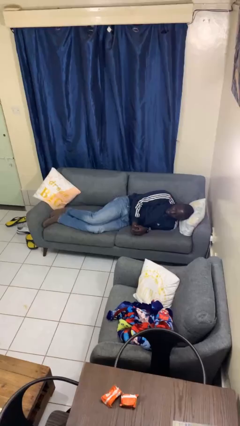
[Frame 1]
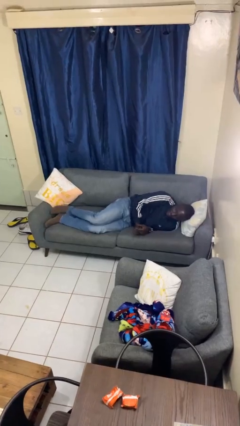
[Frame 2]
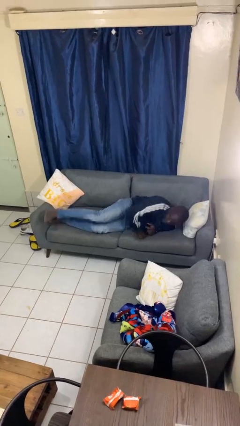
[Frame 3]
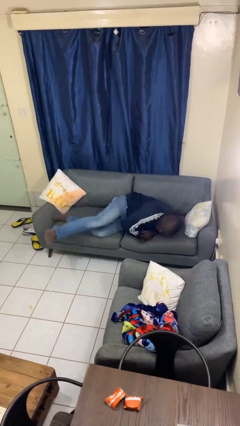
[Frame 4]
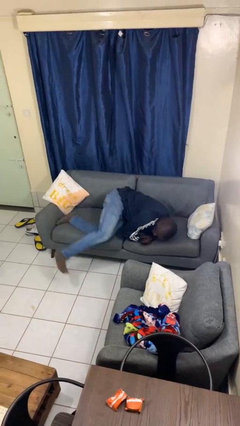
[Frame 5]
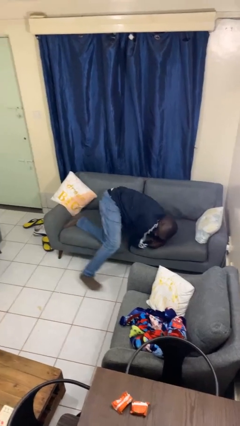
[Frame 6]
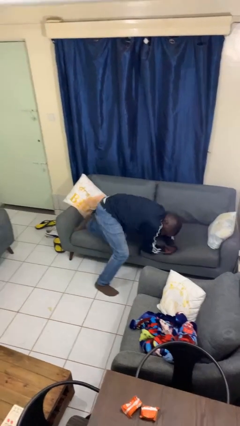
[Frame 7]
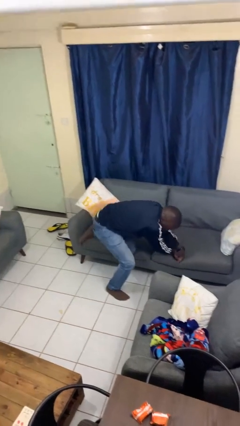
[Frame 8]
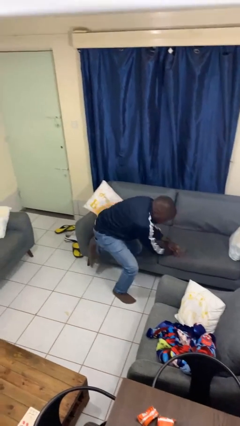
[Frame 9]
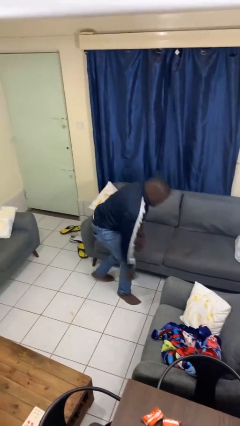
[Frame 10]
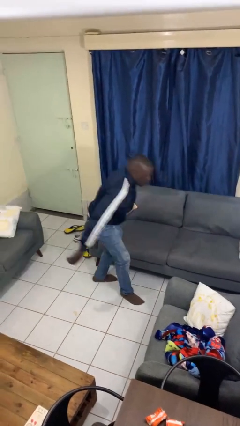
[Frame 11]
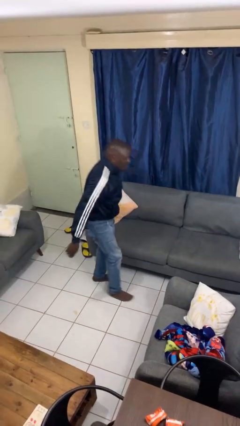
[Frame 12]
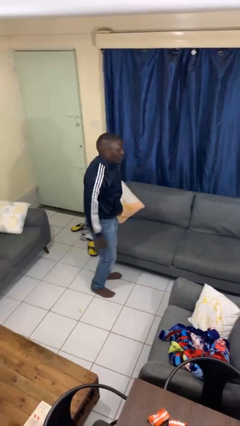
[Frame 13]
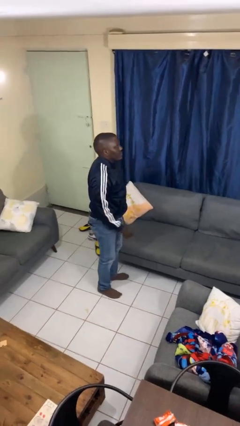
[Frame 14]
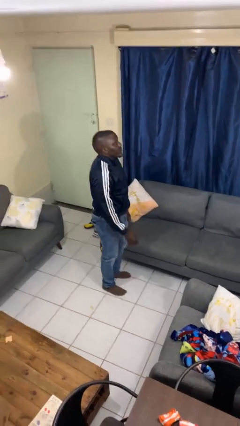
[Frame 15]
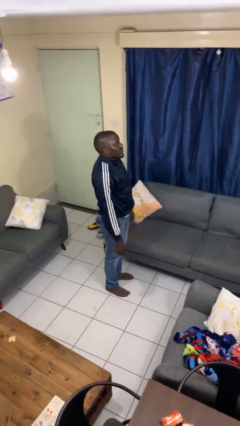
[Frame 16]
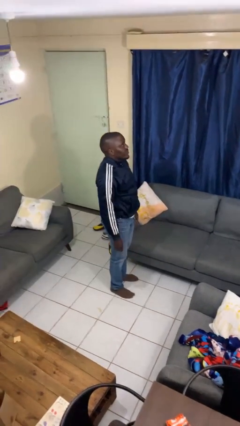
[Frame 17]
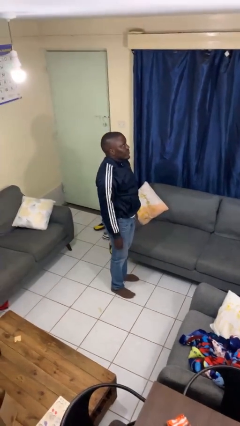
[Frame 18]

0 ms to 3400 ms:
person stands up

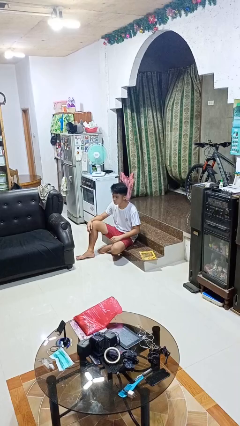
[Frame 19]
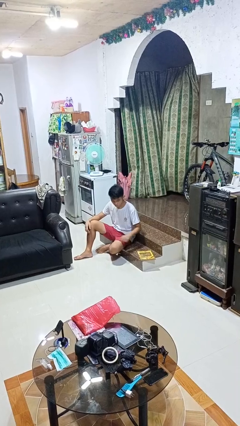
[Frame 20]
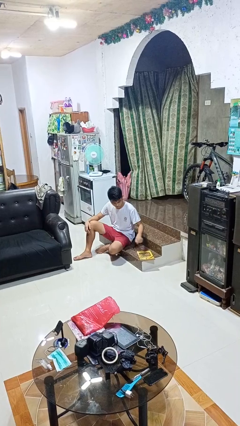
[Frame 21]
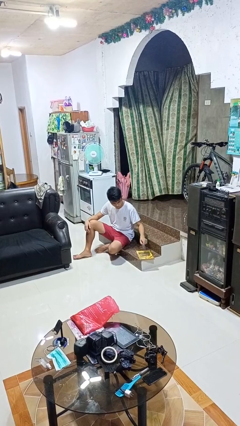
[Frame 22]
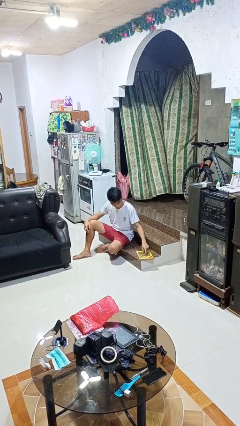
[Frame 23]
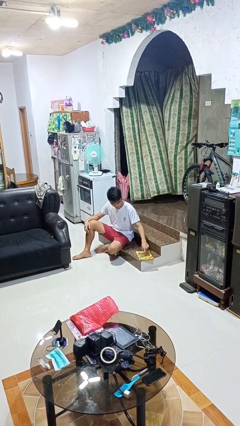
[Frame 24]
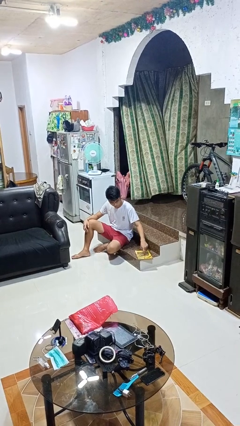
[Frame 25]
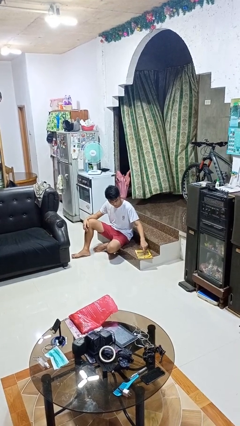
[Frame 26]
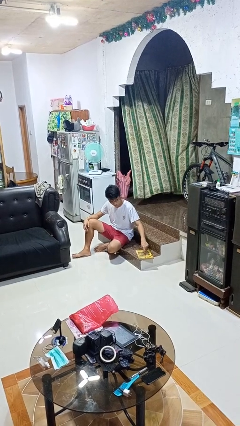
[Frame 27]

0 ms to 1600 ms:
person taps object with finger

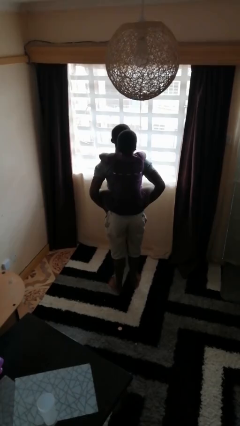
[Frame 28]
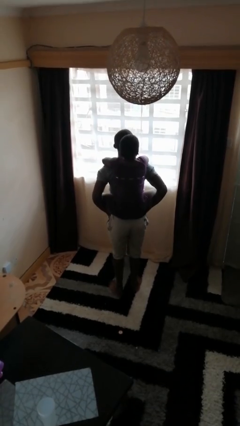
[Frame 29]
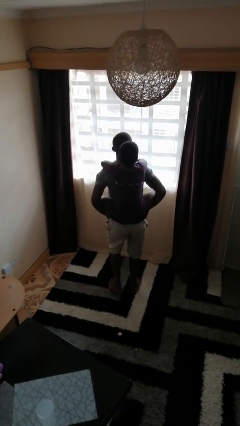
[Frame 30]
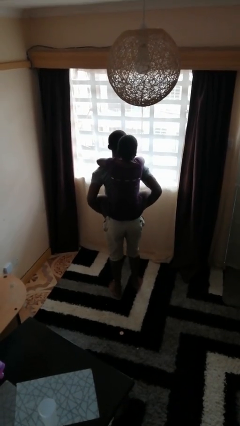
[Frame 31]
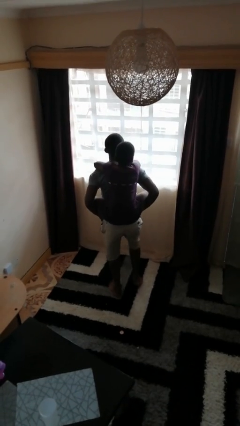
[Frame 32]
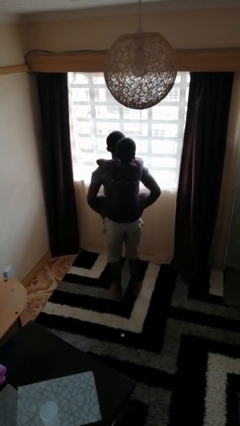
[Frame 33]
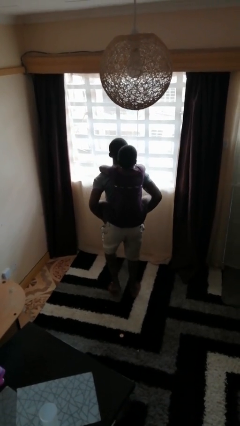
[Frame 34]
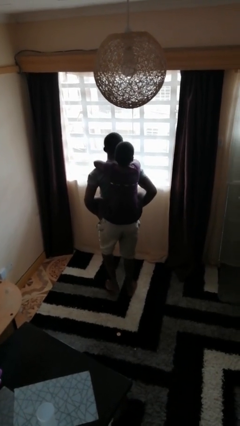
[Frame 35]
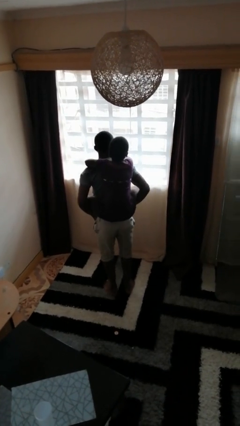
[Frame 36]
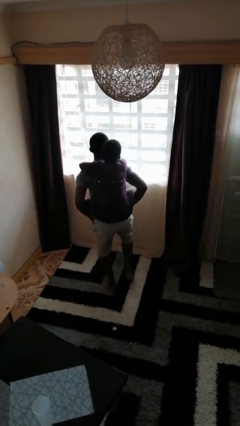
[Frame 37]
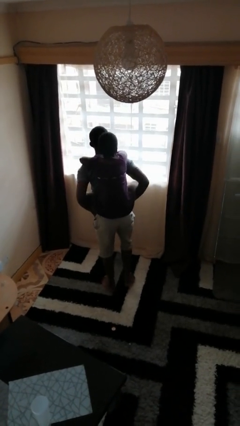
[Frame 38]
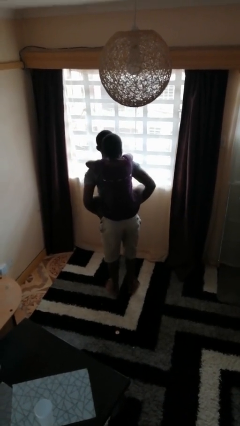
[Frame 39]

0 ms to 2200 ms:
person carries person on back

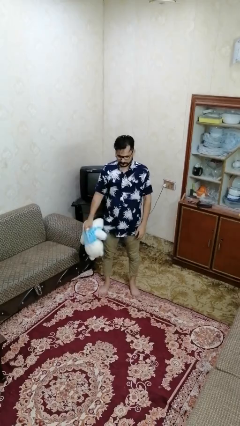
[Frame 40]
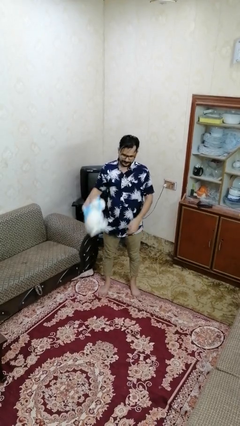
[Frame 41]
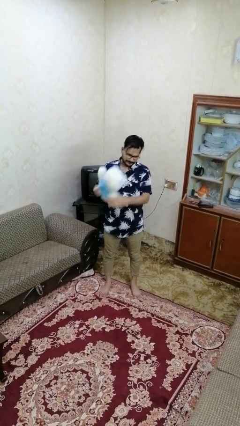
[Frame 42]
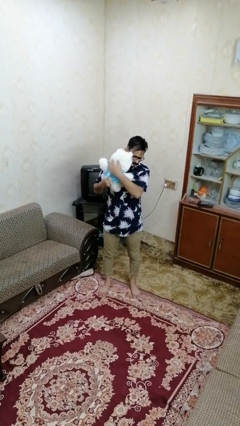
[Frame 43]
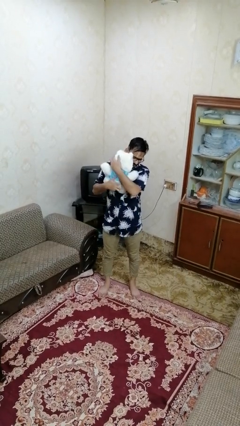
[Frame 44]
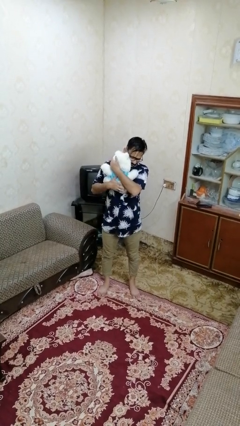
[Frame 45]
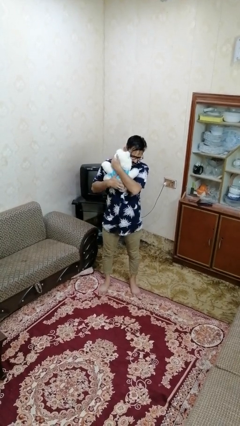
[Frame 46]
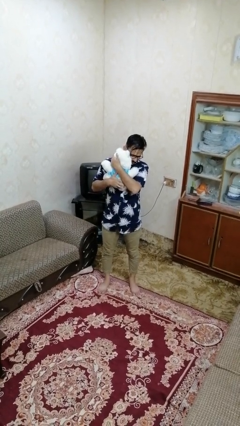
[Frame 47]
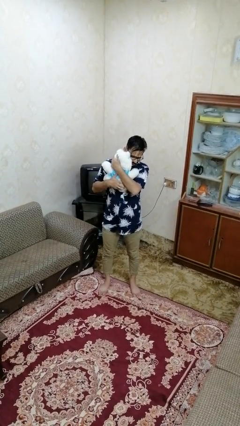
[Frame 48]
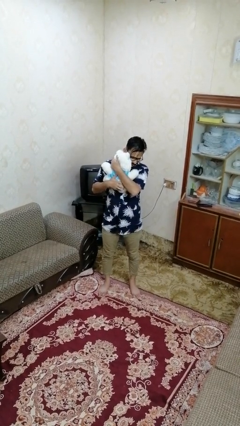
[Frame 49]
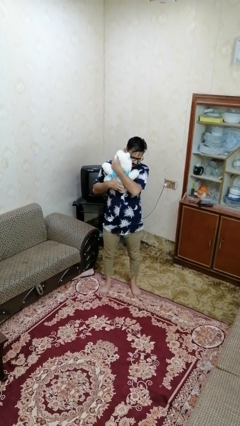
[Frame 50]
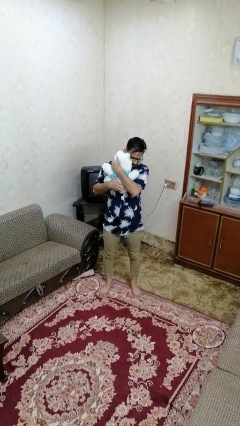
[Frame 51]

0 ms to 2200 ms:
person hugs stuffed animal

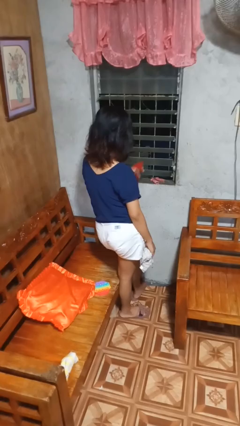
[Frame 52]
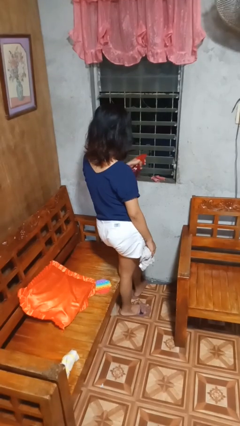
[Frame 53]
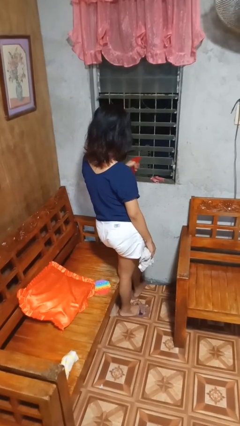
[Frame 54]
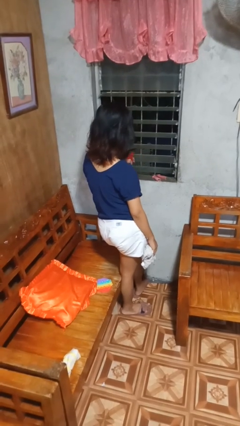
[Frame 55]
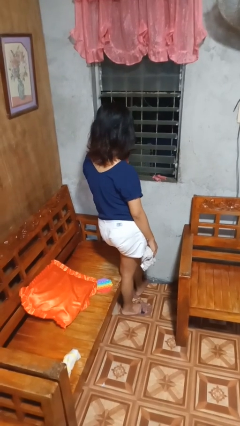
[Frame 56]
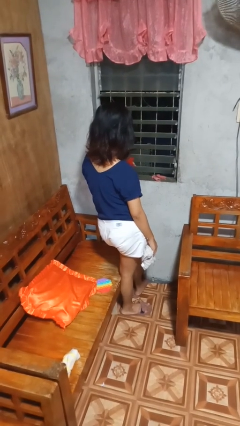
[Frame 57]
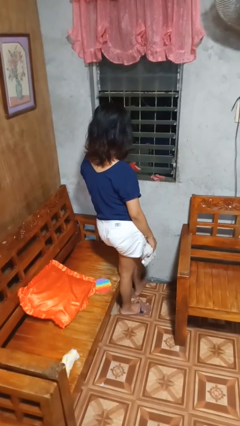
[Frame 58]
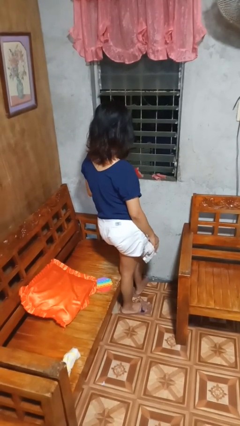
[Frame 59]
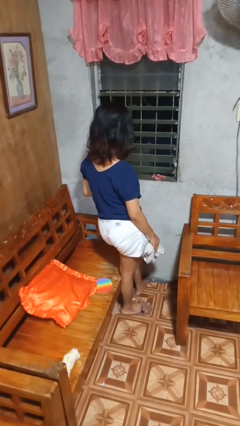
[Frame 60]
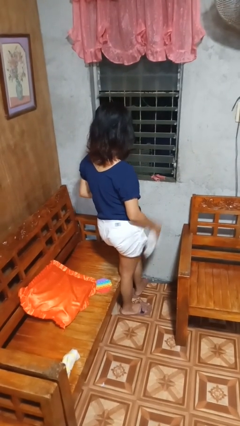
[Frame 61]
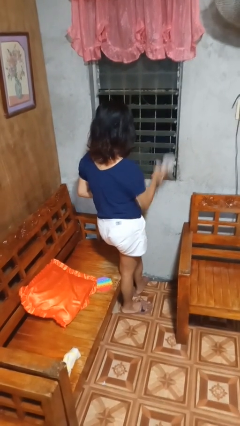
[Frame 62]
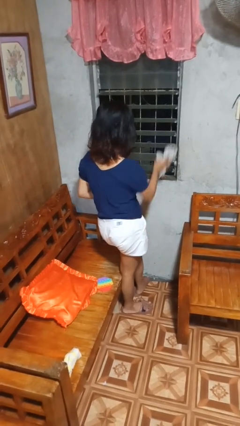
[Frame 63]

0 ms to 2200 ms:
person sprays from bottle

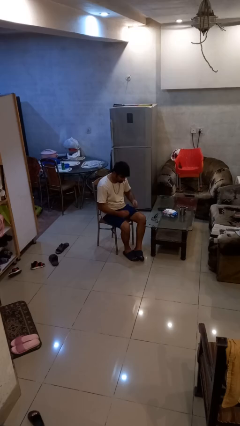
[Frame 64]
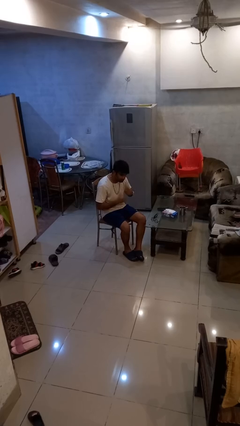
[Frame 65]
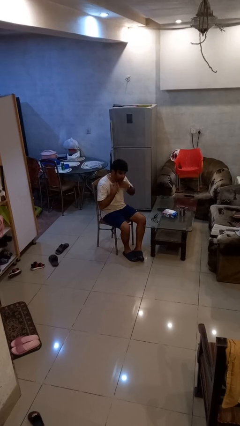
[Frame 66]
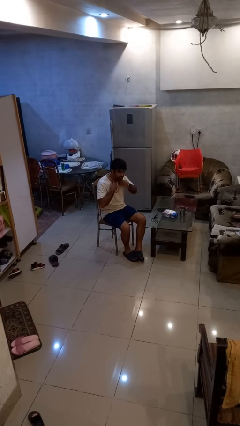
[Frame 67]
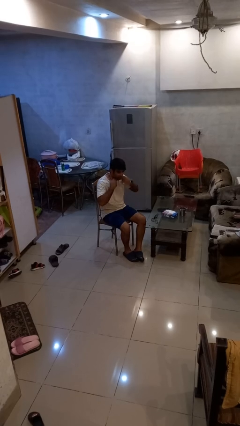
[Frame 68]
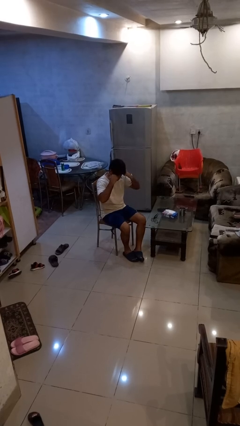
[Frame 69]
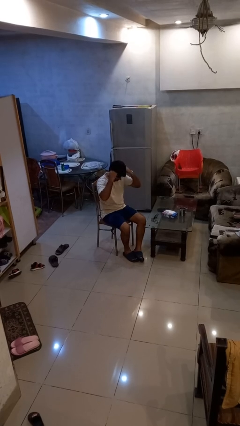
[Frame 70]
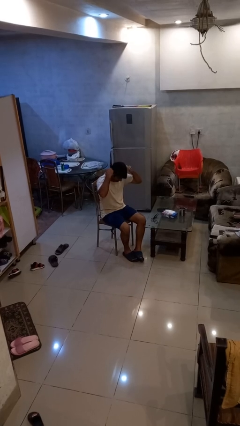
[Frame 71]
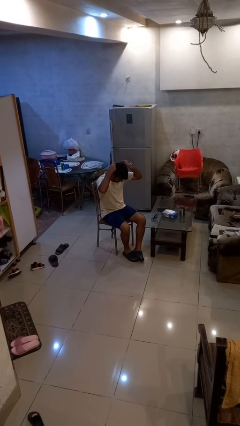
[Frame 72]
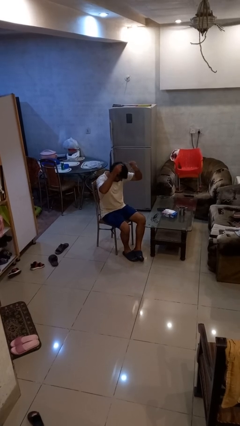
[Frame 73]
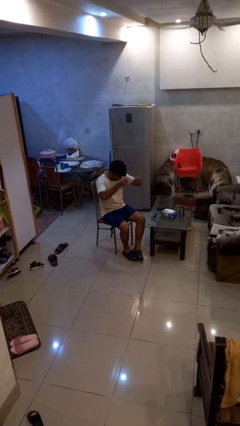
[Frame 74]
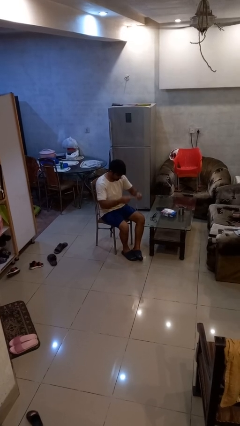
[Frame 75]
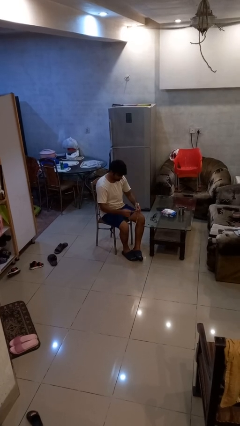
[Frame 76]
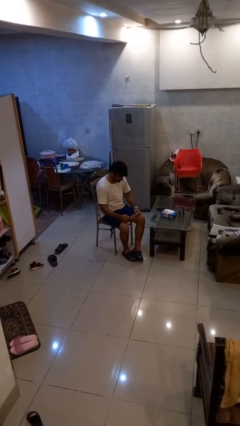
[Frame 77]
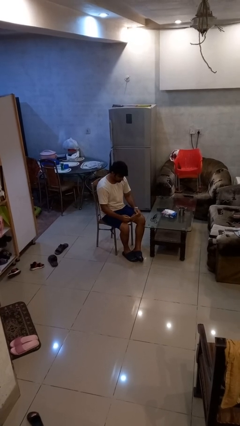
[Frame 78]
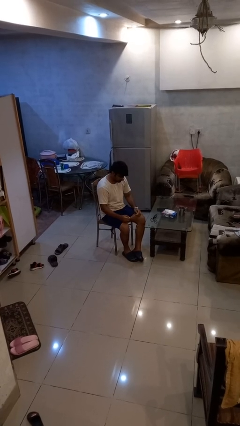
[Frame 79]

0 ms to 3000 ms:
person takes off necklace

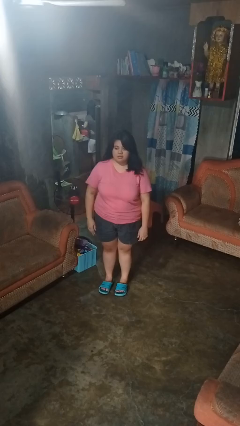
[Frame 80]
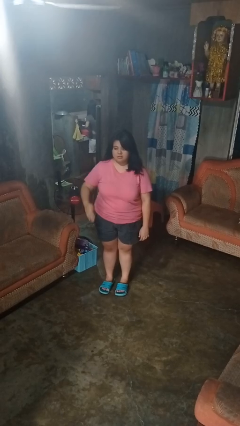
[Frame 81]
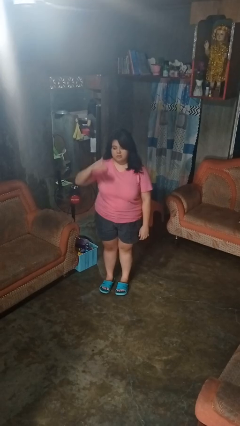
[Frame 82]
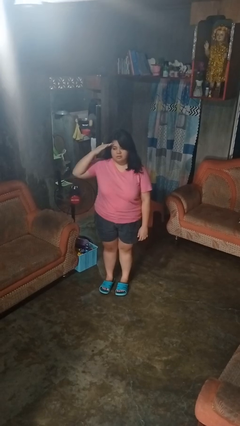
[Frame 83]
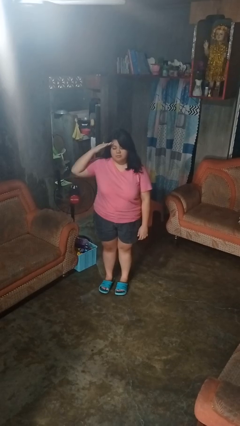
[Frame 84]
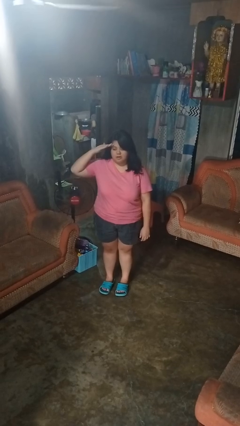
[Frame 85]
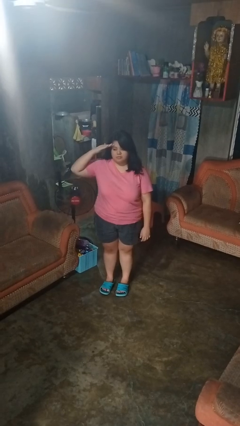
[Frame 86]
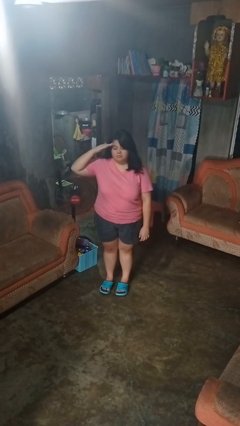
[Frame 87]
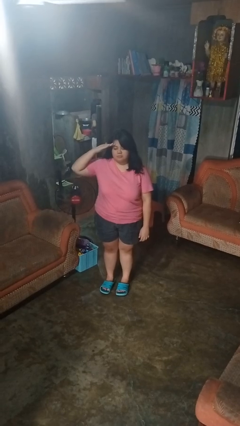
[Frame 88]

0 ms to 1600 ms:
person salutes

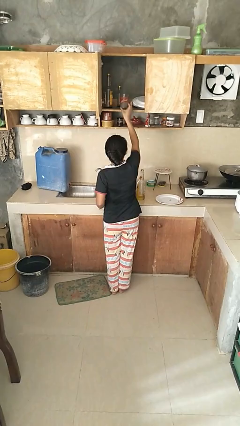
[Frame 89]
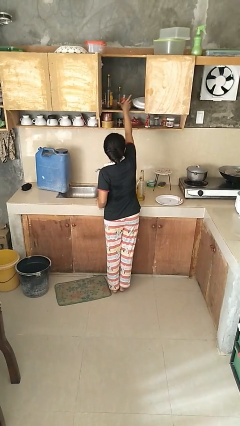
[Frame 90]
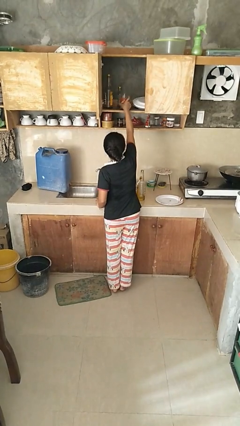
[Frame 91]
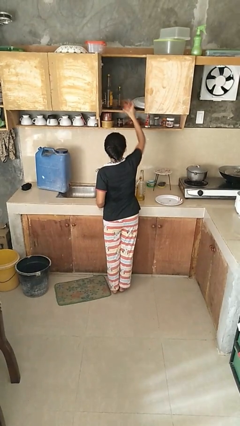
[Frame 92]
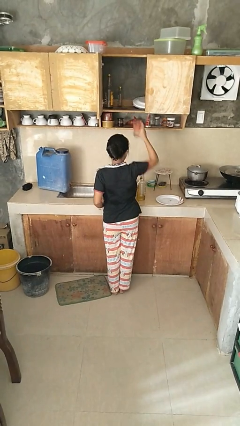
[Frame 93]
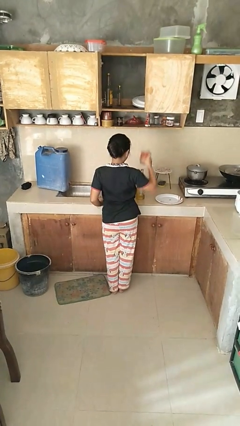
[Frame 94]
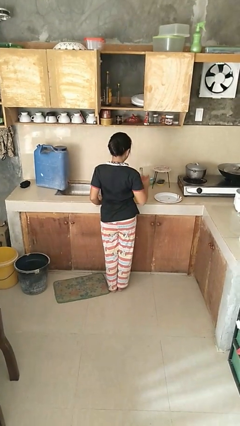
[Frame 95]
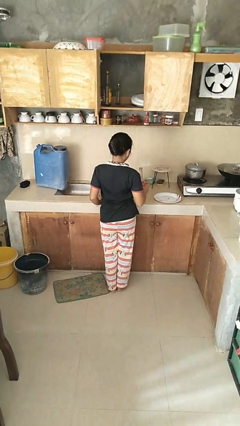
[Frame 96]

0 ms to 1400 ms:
person takes object from cabinet
